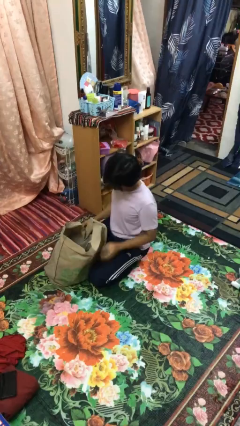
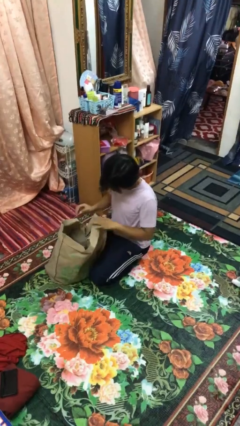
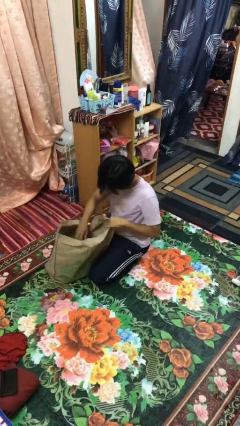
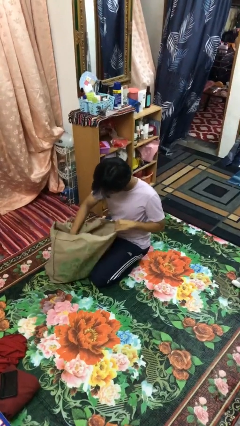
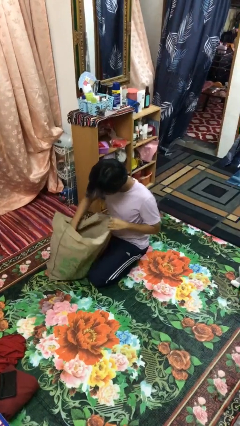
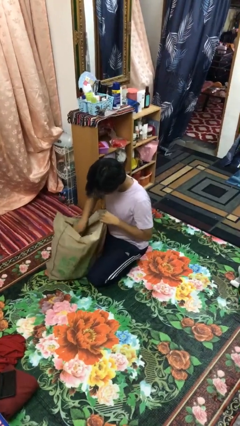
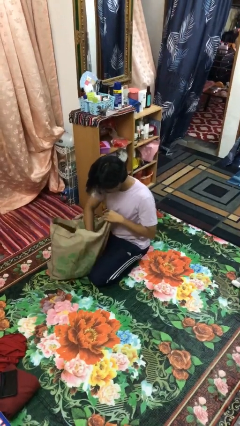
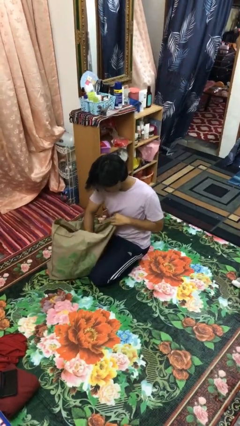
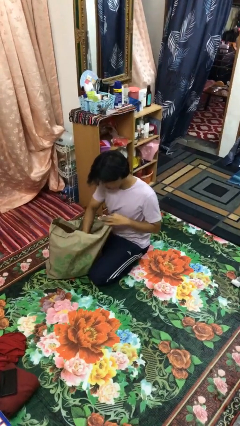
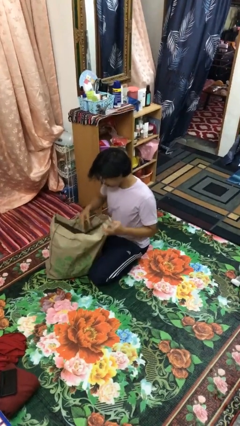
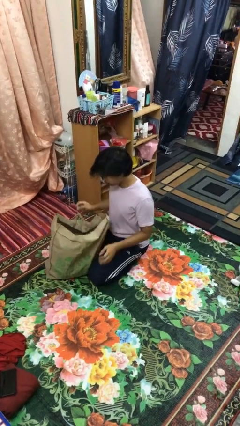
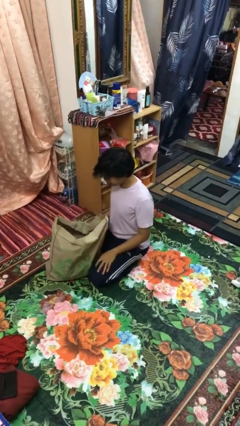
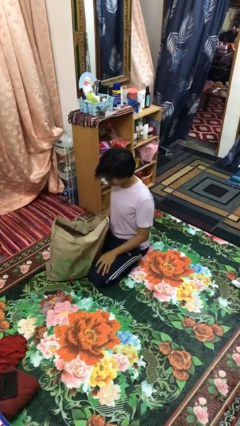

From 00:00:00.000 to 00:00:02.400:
person searches in bag

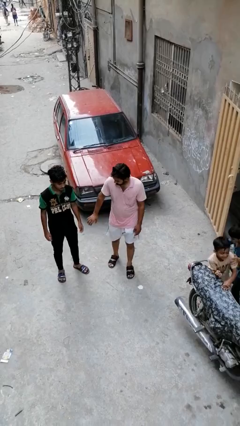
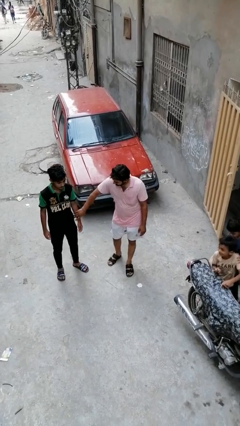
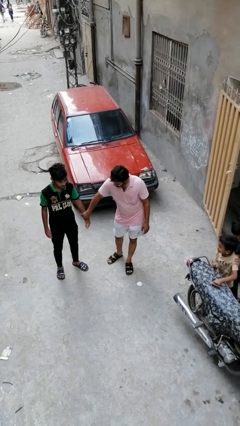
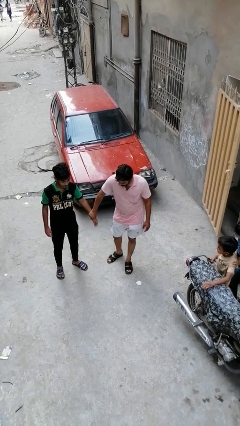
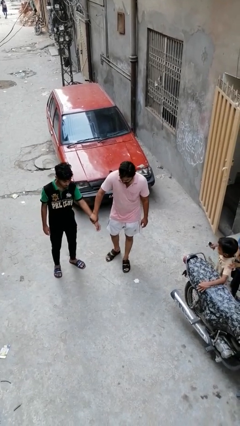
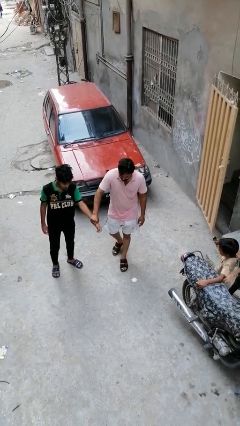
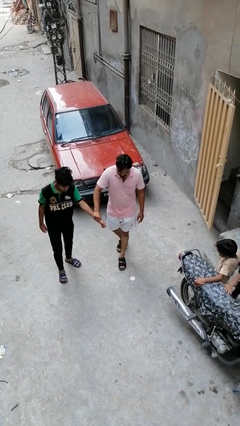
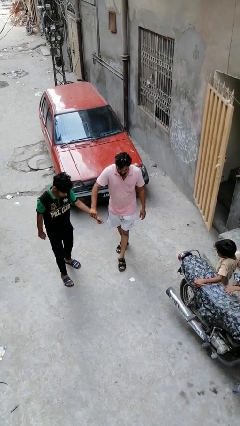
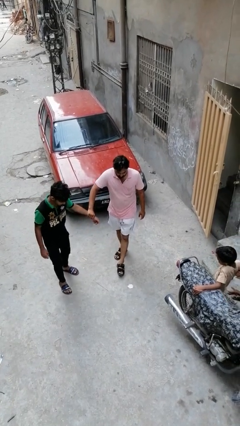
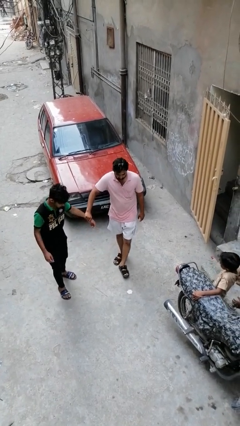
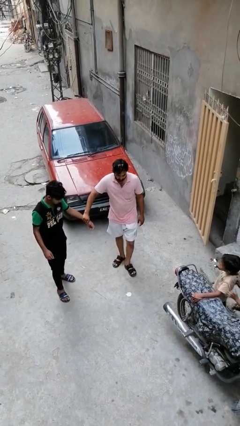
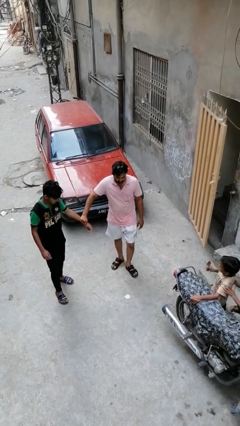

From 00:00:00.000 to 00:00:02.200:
person grabs person by forearm

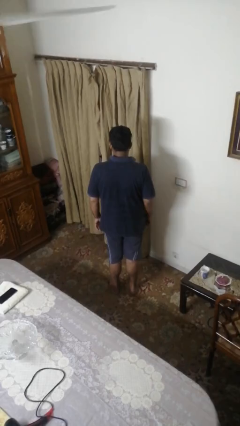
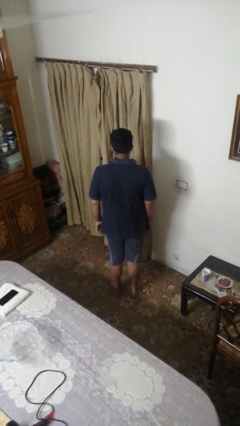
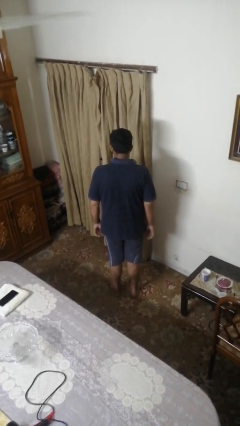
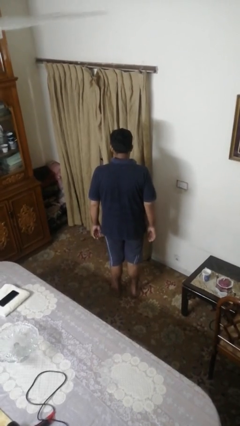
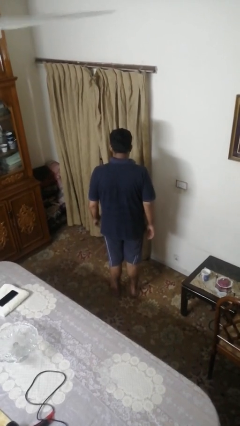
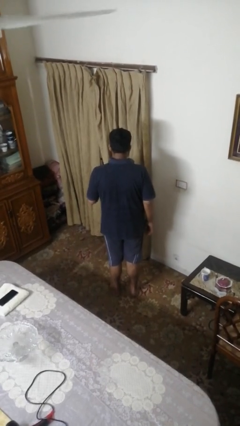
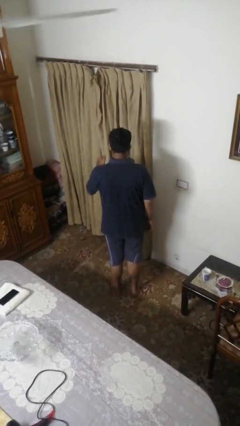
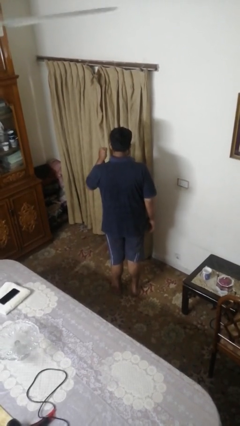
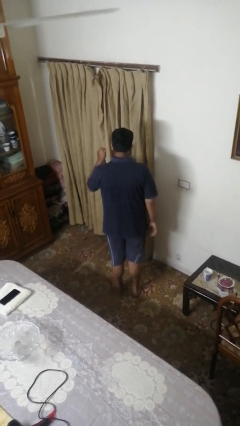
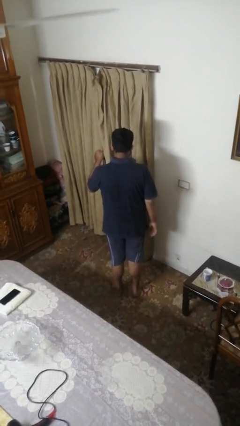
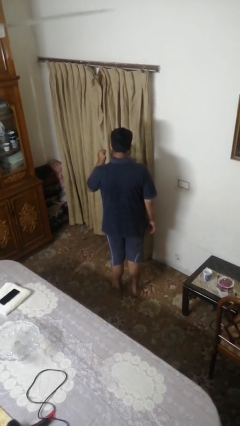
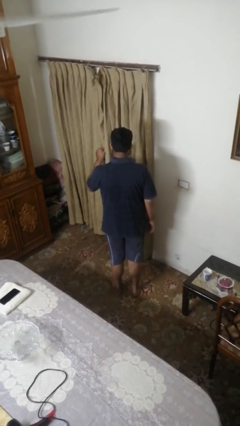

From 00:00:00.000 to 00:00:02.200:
person gestures behind me

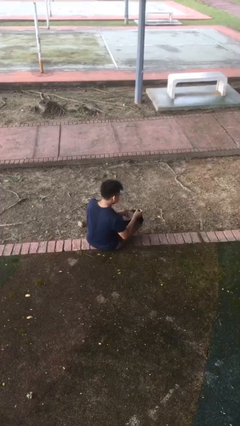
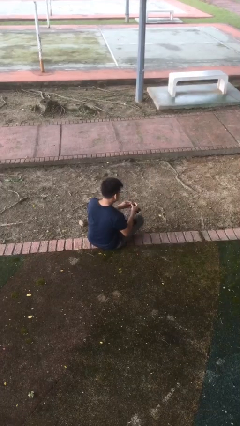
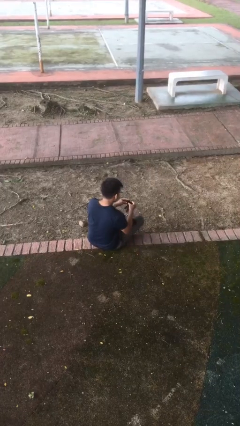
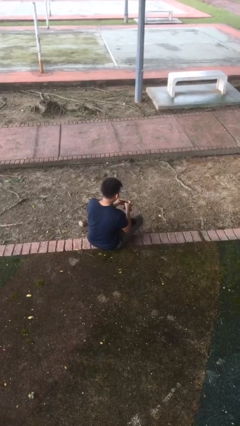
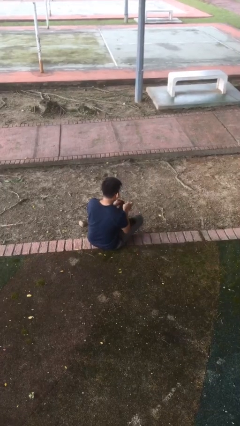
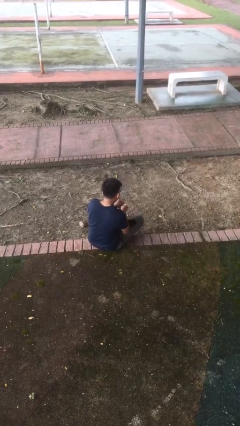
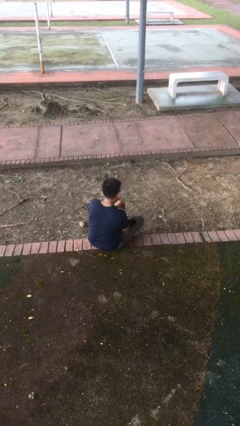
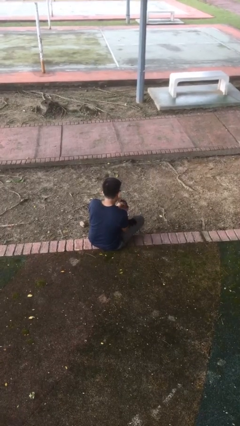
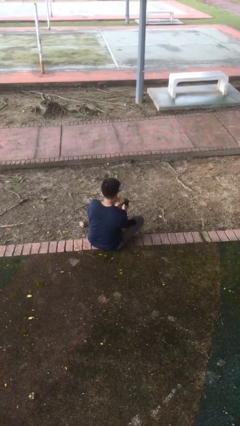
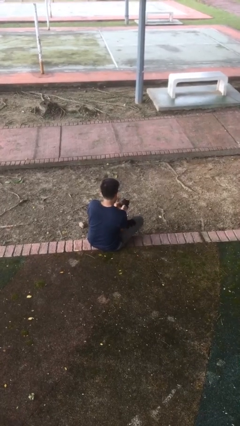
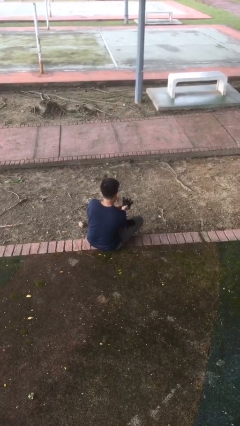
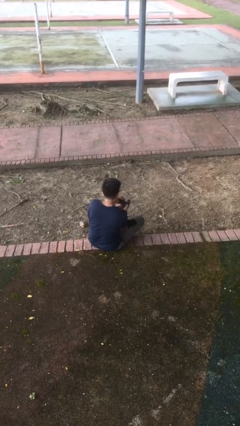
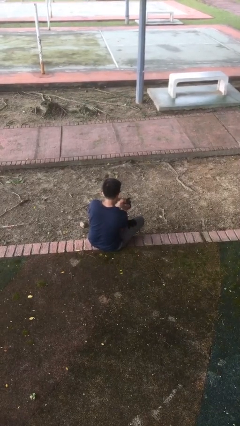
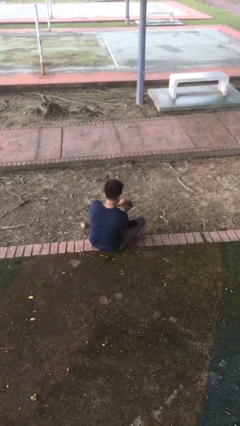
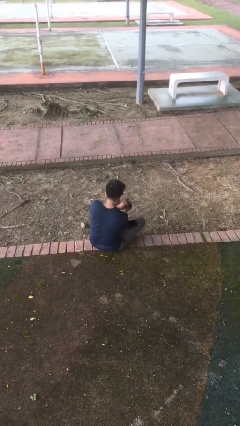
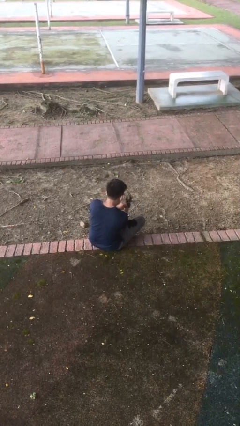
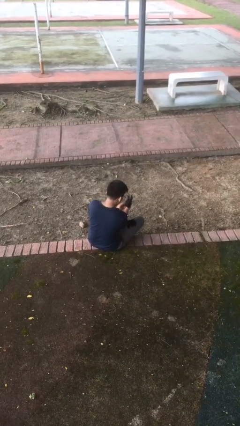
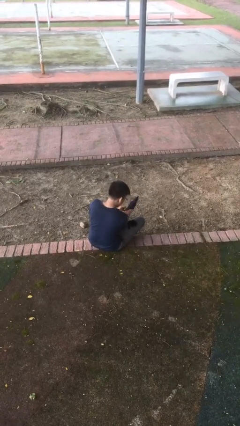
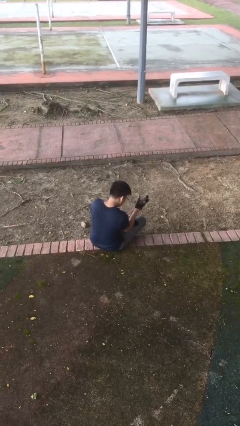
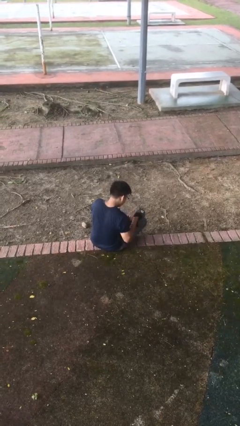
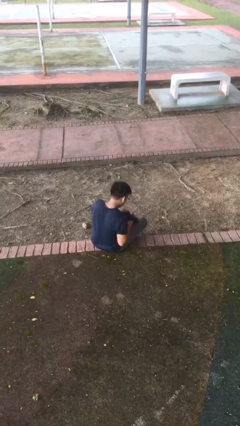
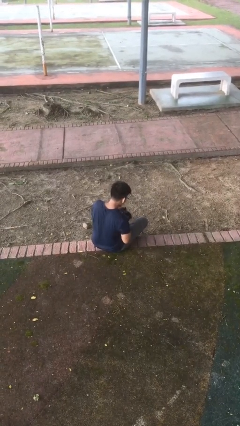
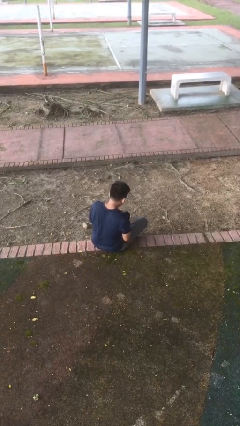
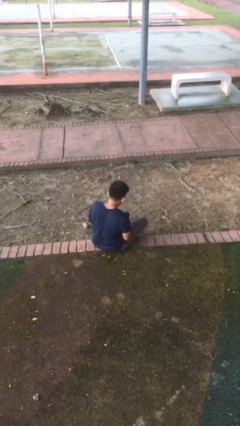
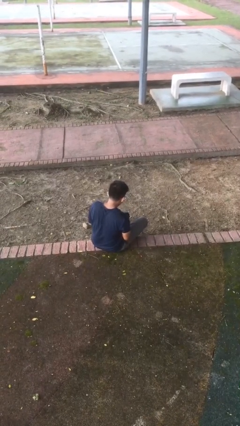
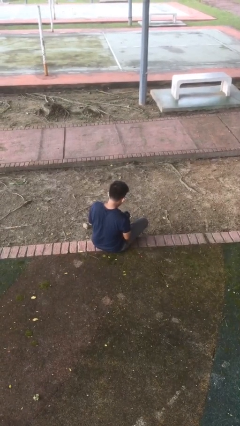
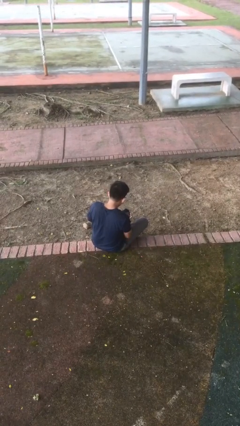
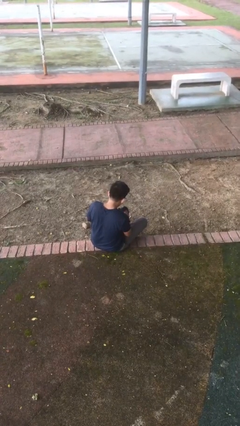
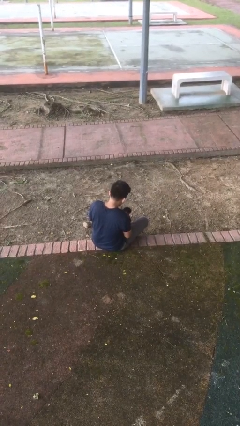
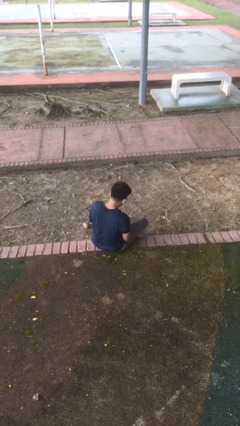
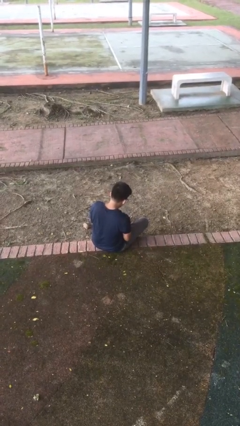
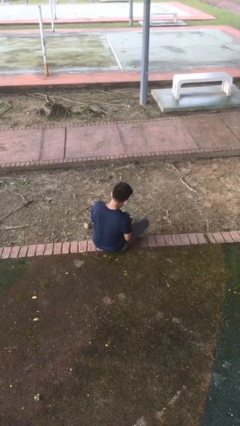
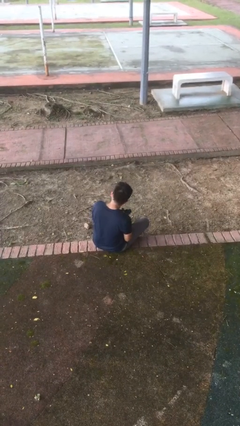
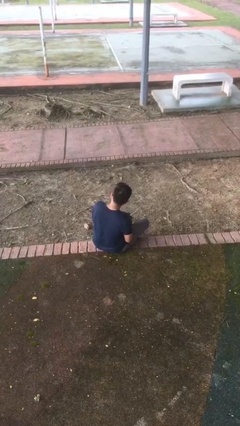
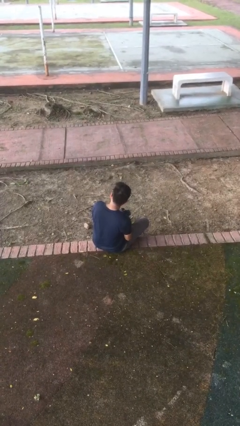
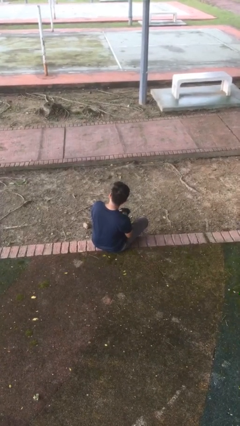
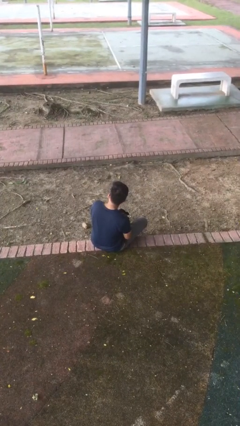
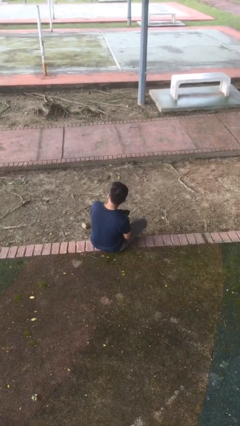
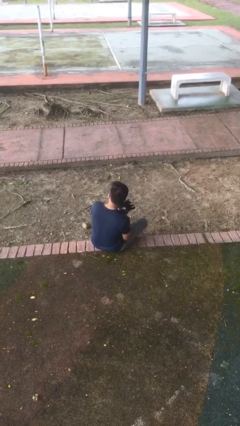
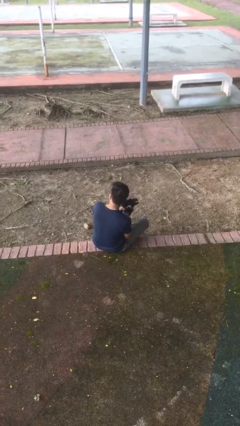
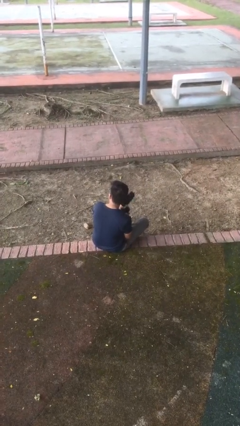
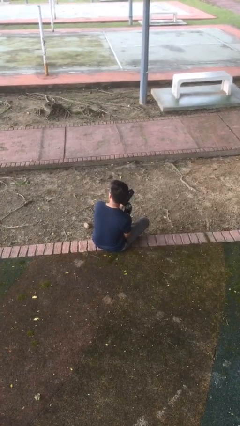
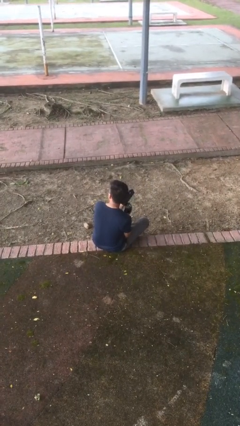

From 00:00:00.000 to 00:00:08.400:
person puts on gloves

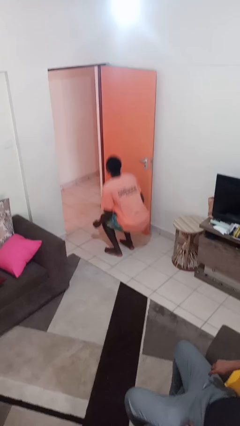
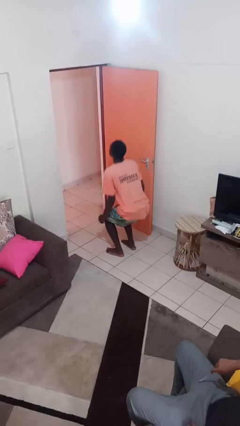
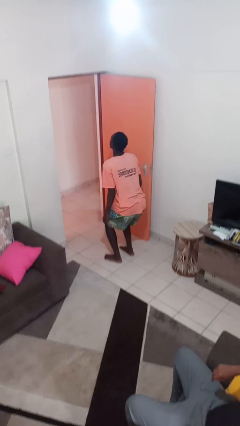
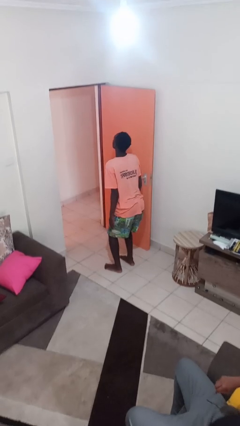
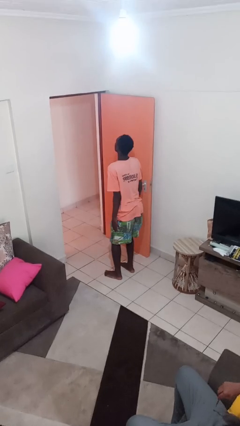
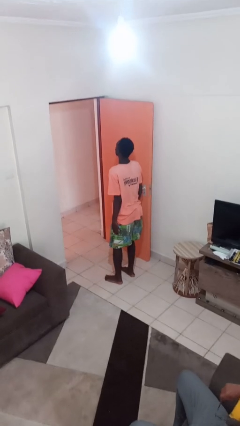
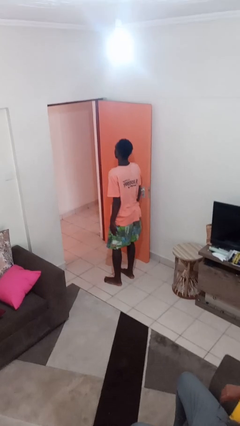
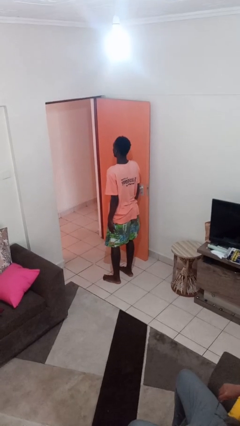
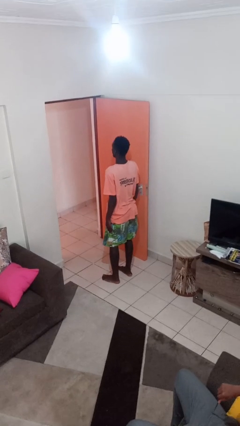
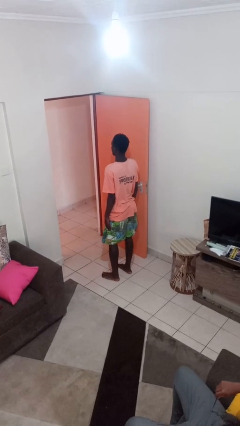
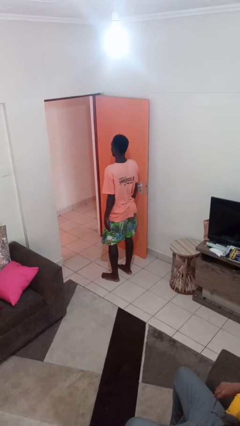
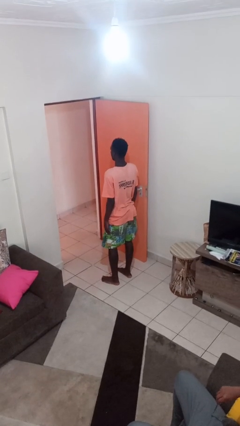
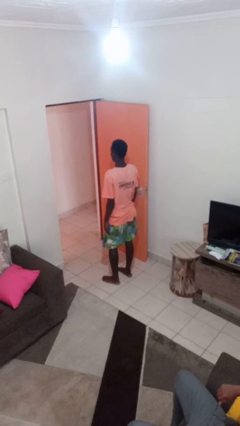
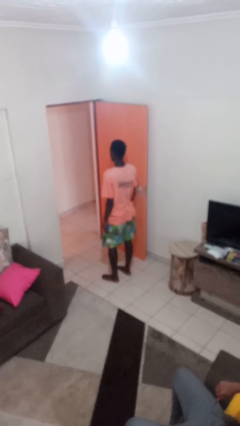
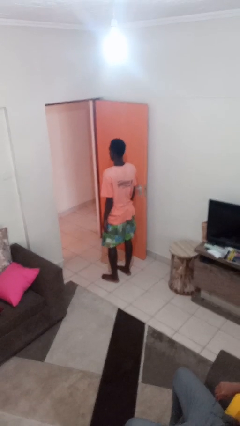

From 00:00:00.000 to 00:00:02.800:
person stands up
